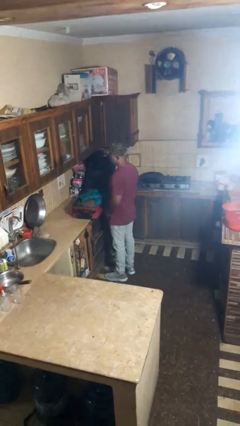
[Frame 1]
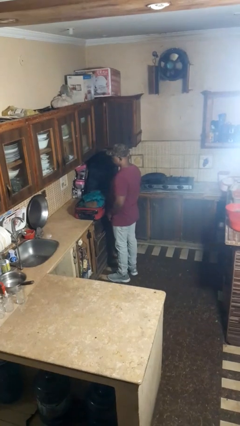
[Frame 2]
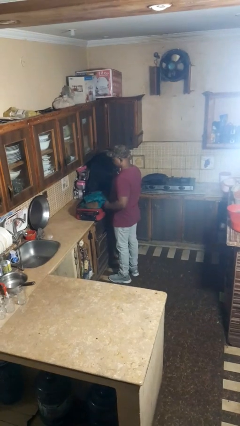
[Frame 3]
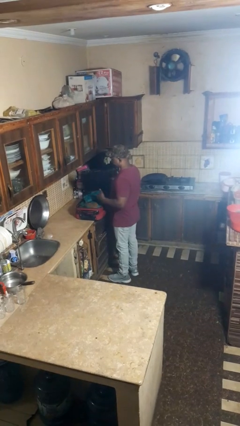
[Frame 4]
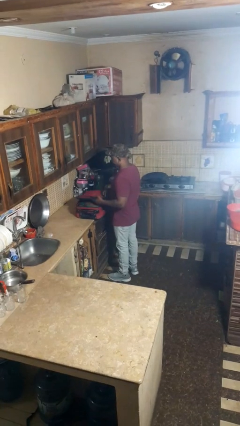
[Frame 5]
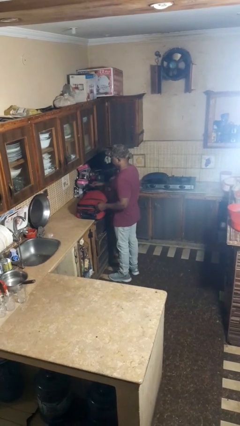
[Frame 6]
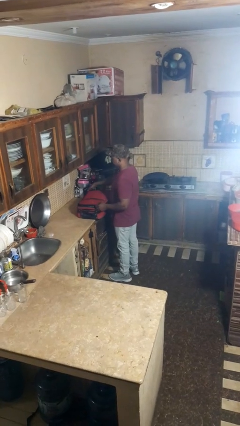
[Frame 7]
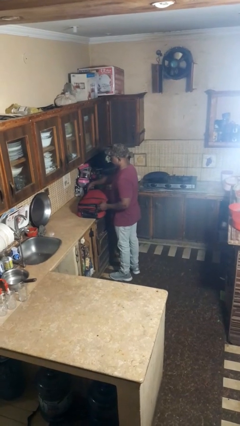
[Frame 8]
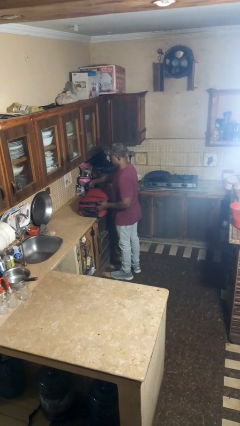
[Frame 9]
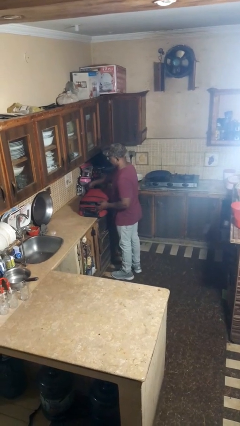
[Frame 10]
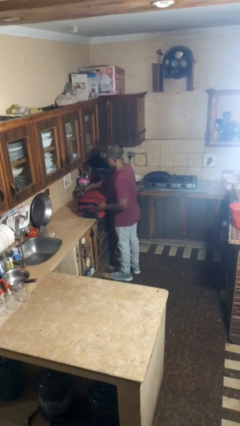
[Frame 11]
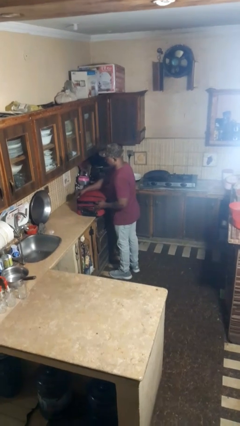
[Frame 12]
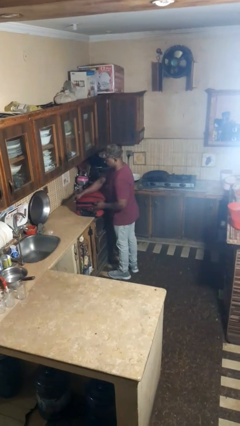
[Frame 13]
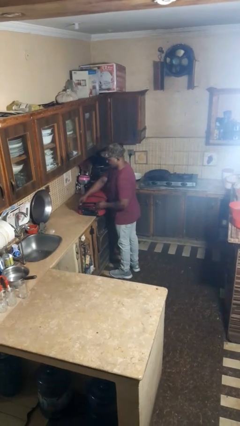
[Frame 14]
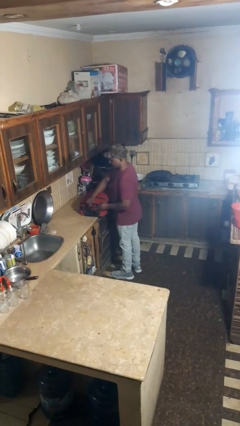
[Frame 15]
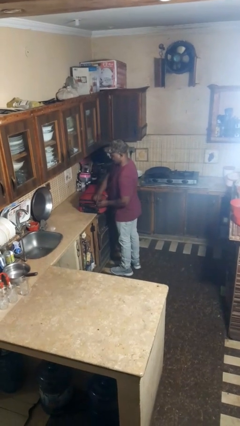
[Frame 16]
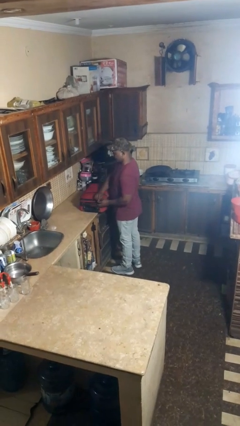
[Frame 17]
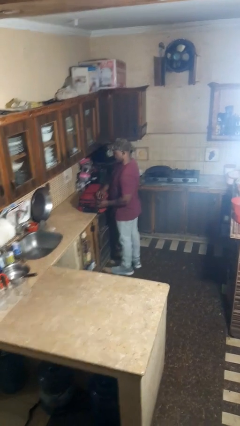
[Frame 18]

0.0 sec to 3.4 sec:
person closes suitcase

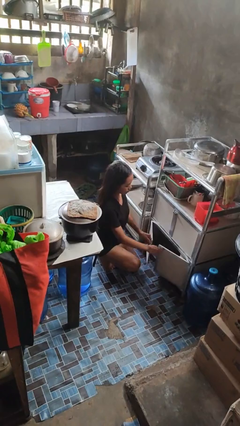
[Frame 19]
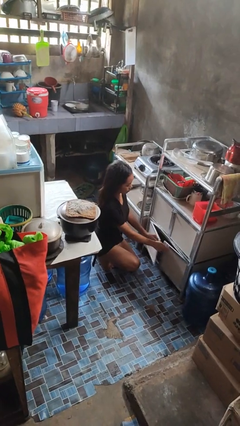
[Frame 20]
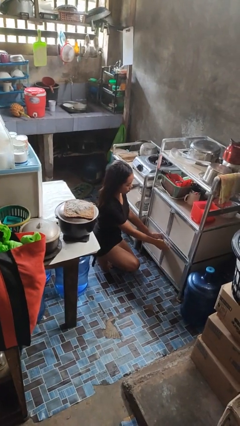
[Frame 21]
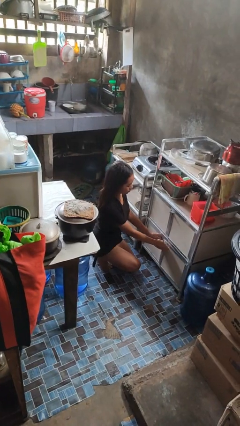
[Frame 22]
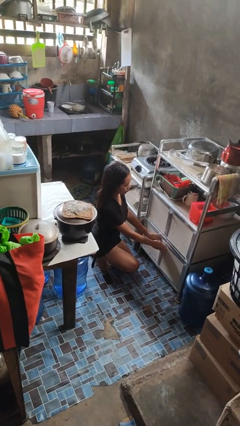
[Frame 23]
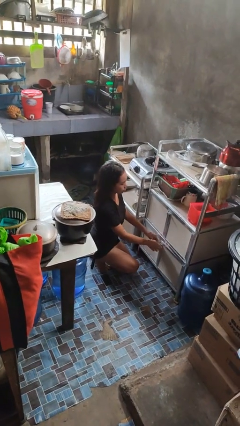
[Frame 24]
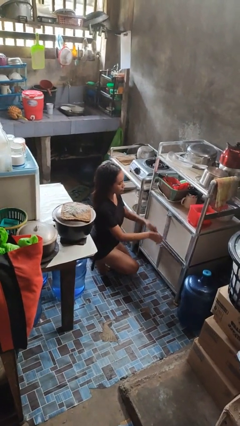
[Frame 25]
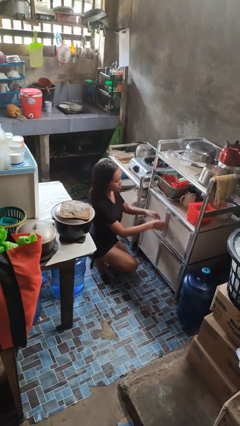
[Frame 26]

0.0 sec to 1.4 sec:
person closes cabinet

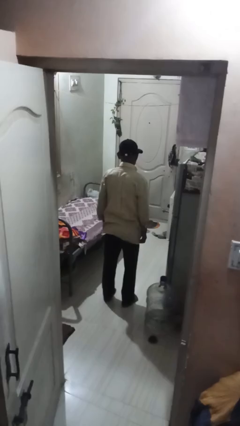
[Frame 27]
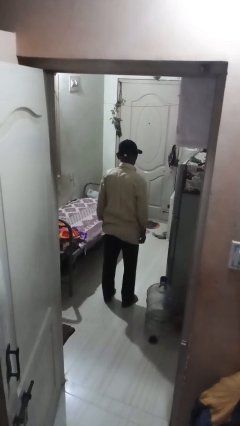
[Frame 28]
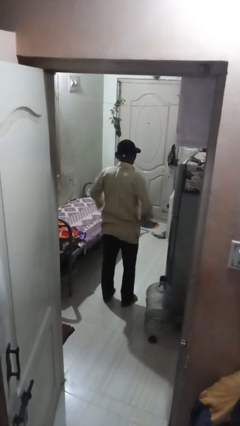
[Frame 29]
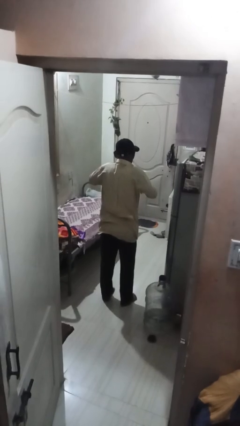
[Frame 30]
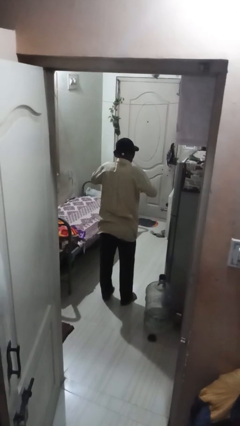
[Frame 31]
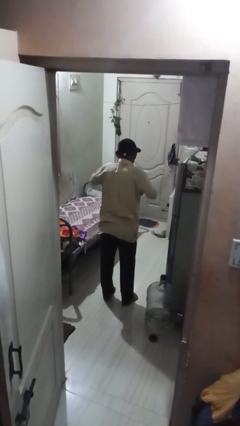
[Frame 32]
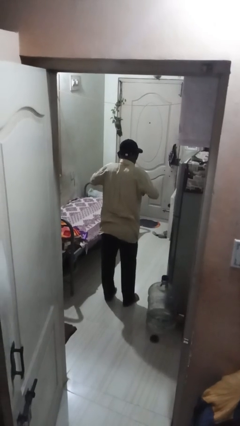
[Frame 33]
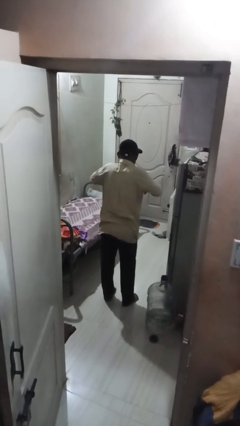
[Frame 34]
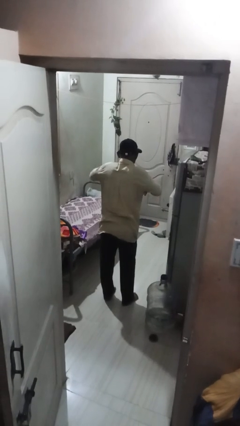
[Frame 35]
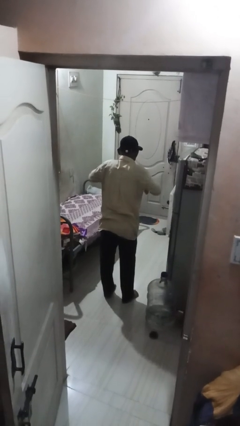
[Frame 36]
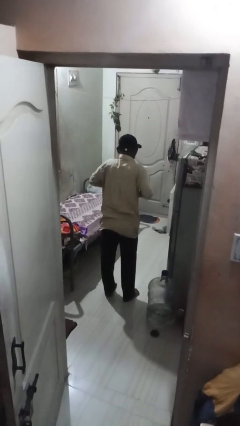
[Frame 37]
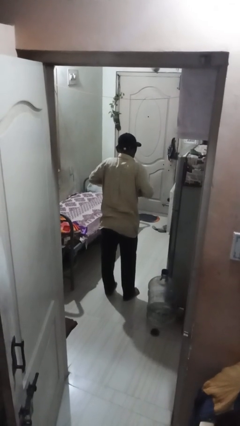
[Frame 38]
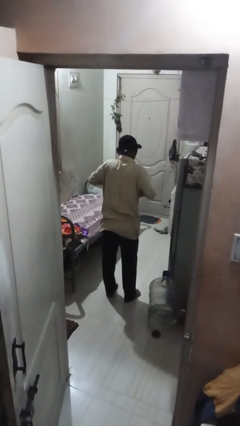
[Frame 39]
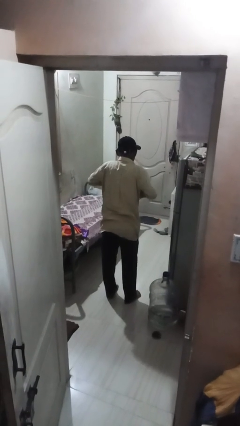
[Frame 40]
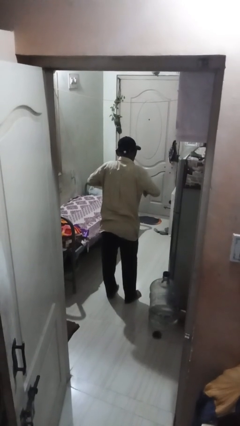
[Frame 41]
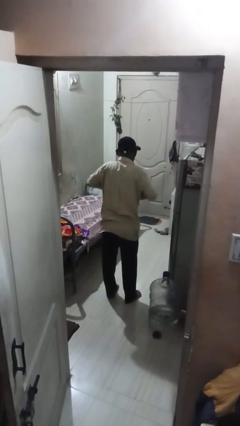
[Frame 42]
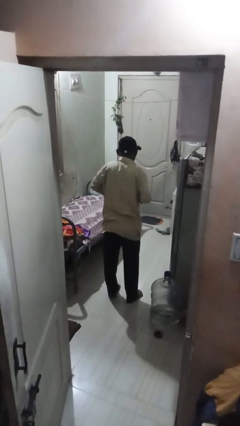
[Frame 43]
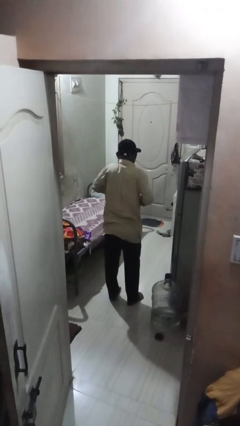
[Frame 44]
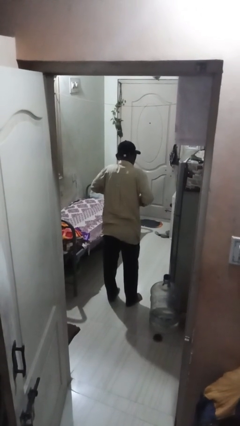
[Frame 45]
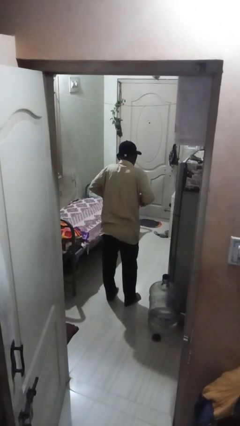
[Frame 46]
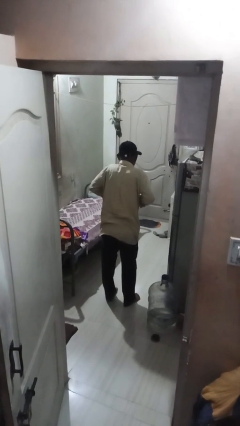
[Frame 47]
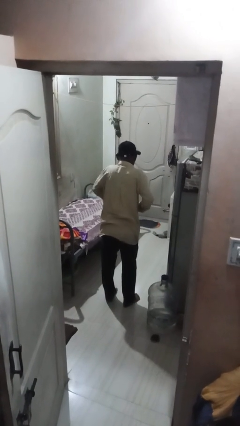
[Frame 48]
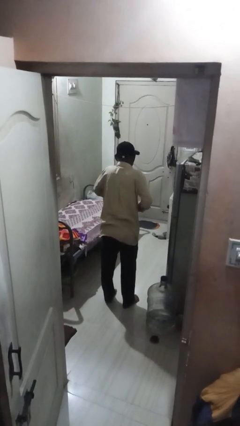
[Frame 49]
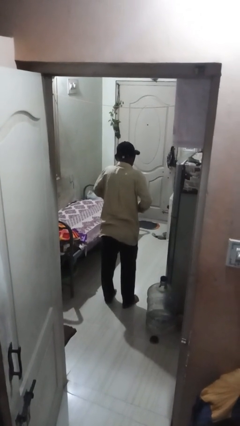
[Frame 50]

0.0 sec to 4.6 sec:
person buttons shirt

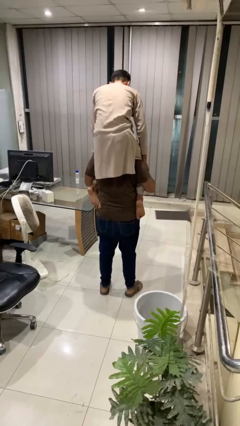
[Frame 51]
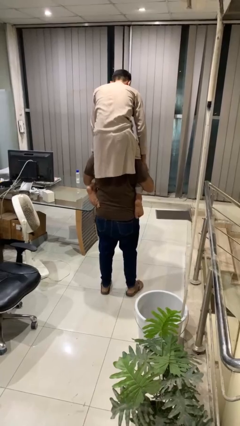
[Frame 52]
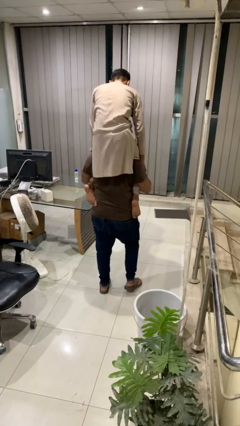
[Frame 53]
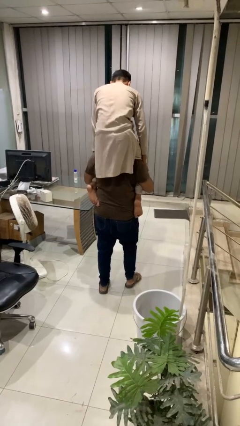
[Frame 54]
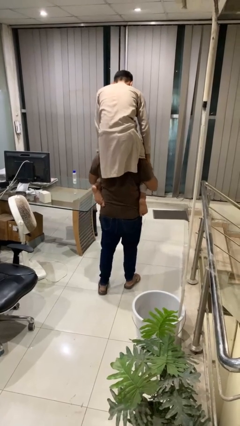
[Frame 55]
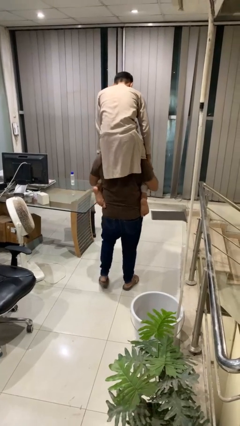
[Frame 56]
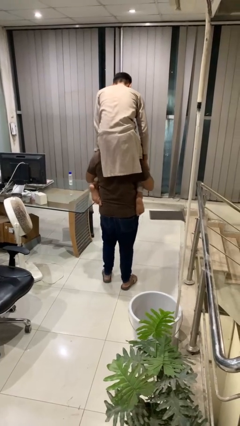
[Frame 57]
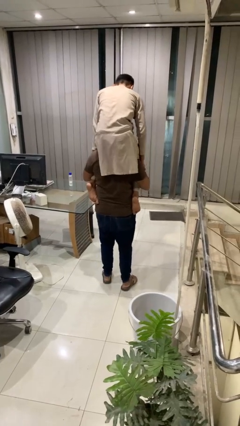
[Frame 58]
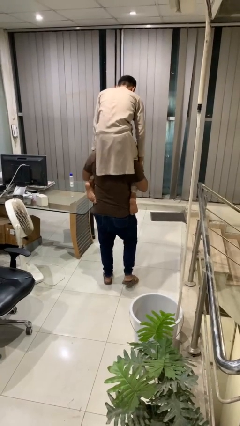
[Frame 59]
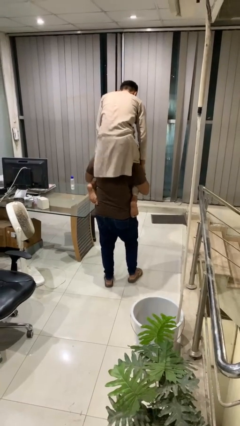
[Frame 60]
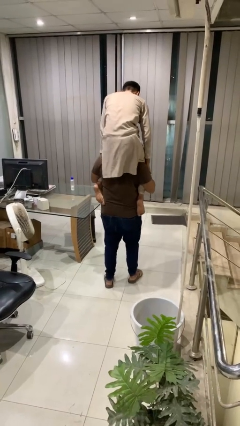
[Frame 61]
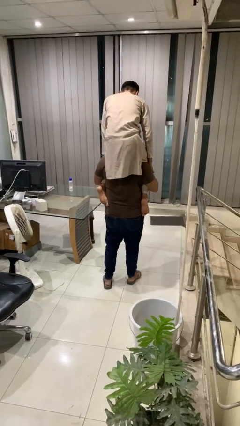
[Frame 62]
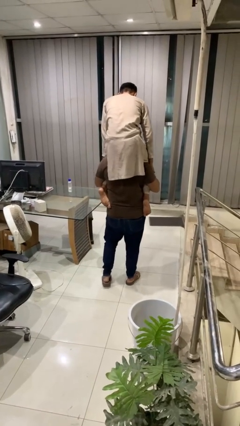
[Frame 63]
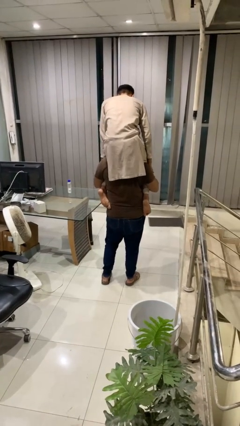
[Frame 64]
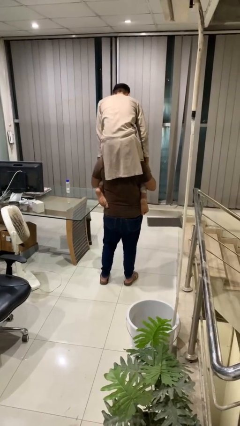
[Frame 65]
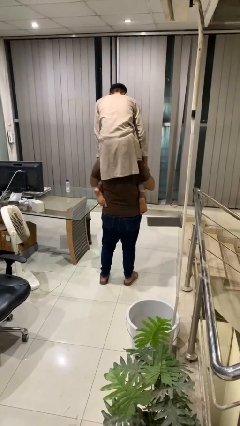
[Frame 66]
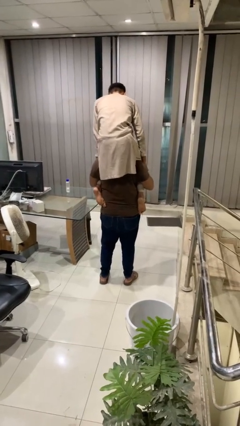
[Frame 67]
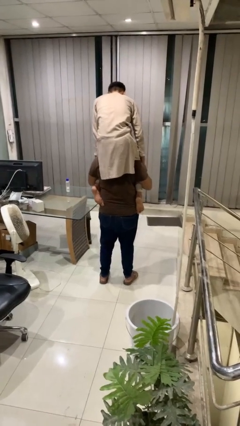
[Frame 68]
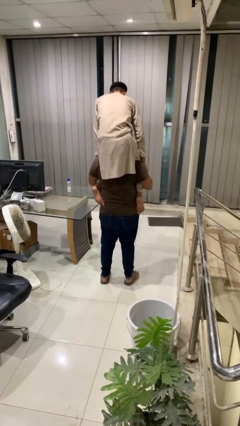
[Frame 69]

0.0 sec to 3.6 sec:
person carries person on shoulders

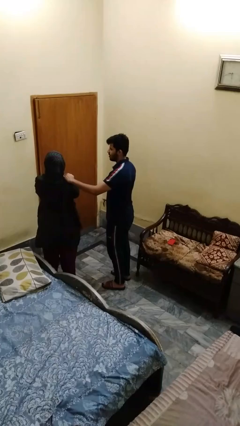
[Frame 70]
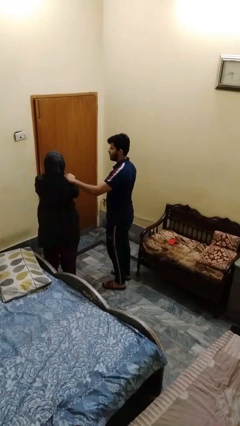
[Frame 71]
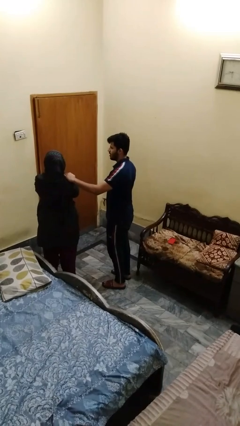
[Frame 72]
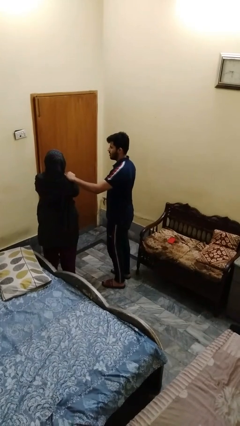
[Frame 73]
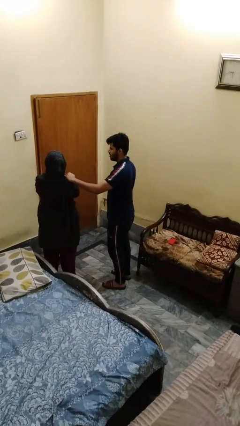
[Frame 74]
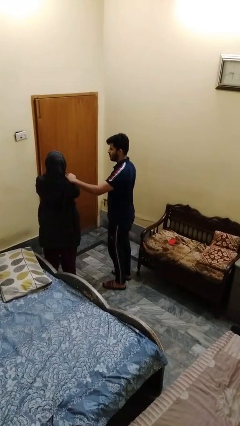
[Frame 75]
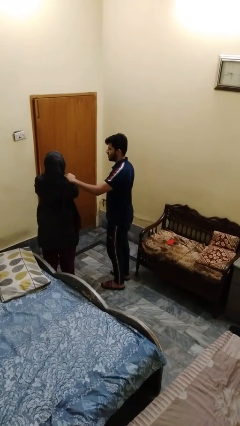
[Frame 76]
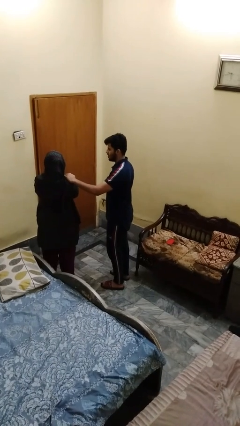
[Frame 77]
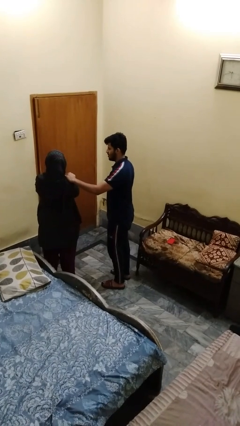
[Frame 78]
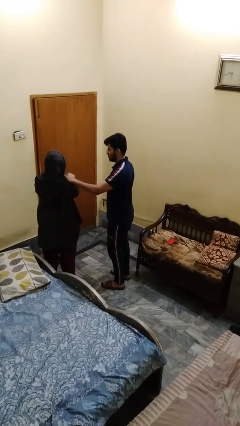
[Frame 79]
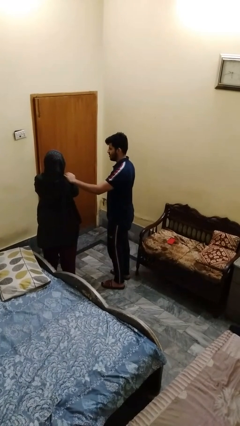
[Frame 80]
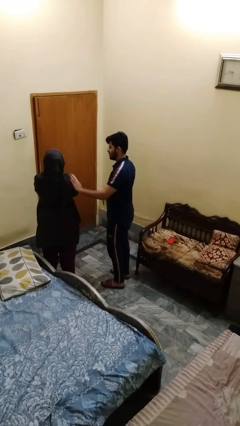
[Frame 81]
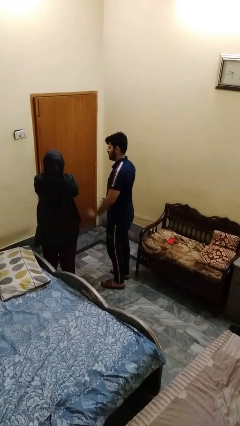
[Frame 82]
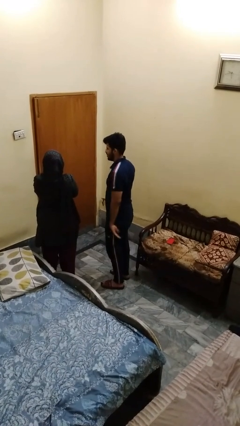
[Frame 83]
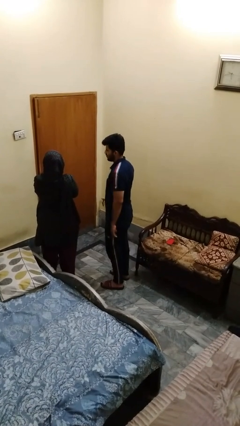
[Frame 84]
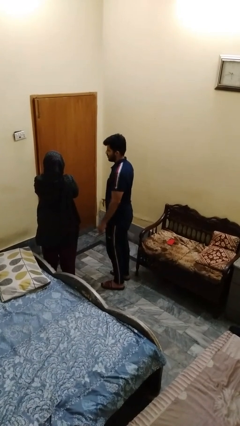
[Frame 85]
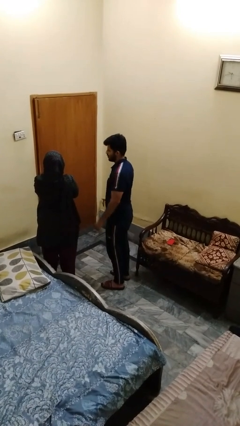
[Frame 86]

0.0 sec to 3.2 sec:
person pounds shoulders of person

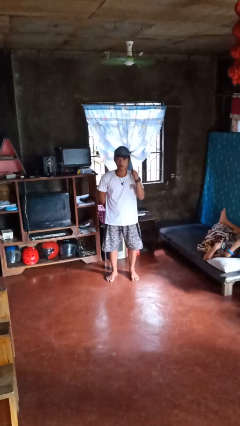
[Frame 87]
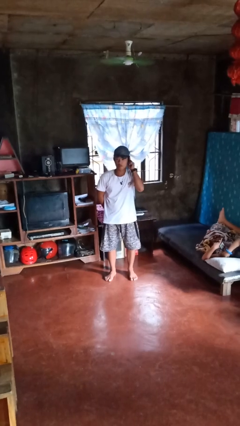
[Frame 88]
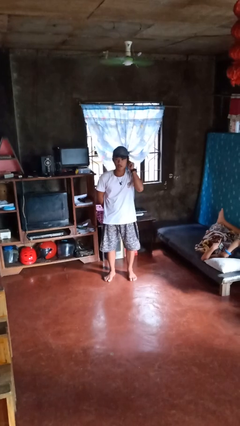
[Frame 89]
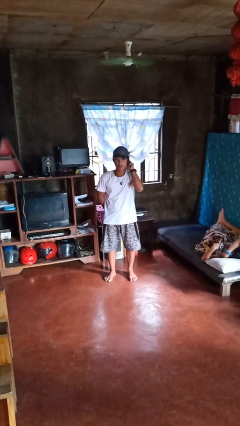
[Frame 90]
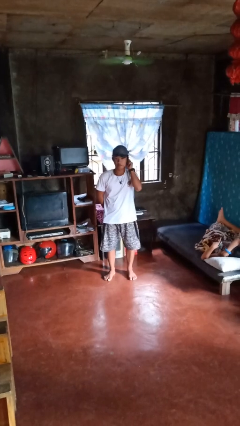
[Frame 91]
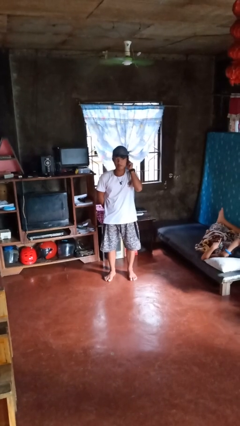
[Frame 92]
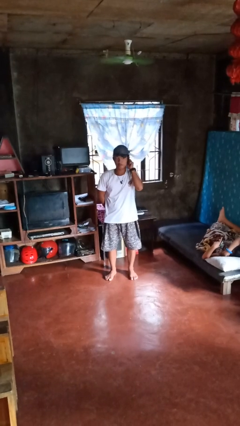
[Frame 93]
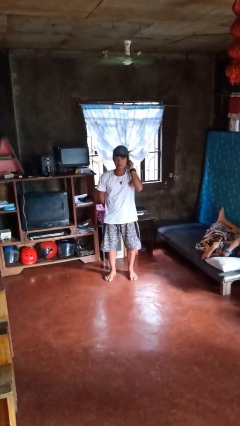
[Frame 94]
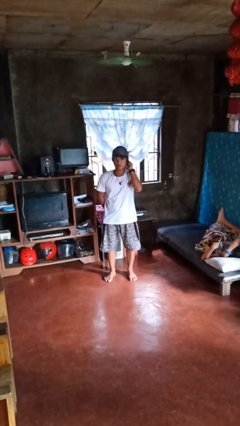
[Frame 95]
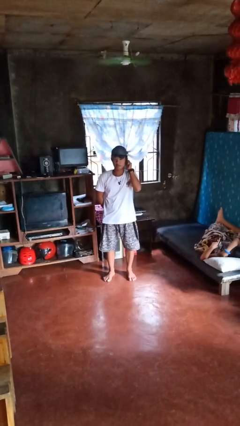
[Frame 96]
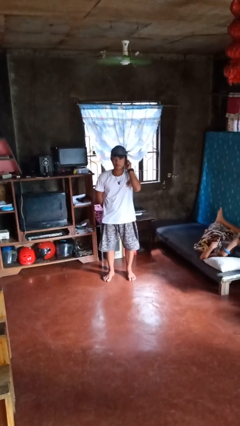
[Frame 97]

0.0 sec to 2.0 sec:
person touches earlobe
